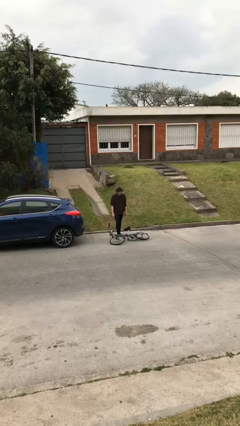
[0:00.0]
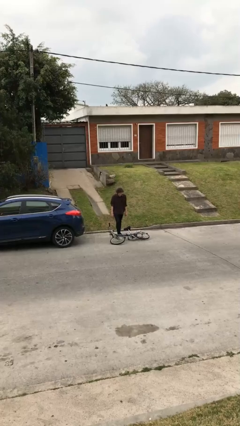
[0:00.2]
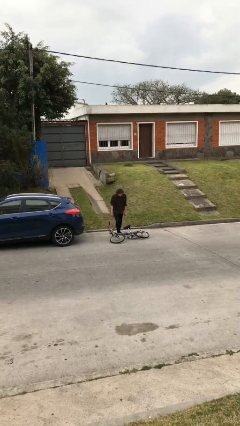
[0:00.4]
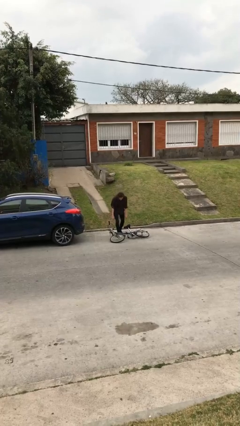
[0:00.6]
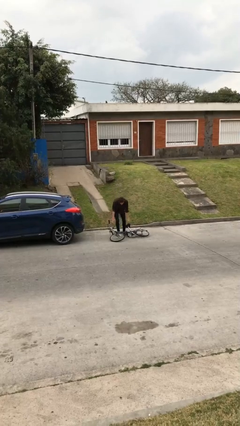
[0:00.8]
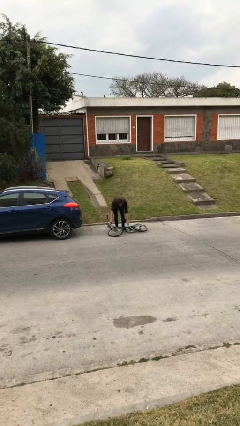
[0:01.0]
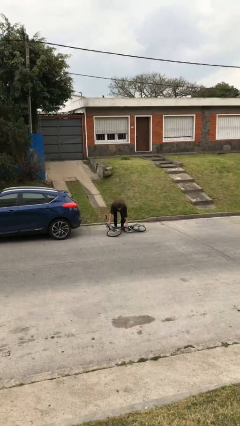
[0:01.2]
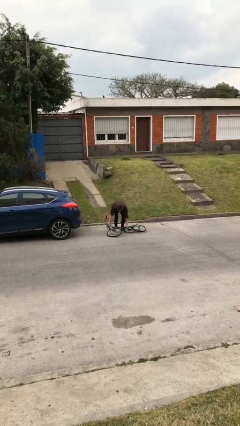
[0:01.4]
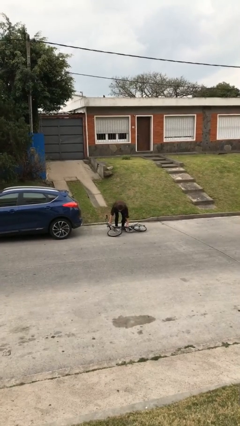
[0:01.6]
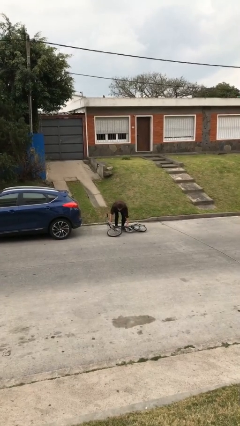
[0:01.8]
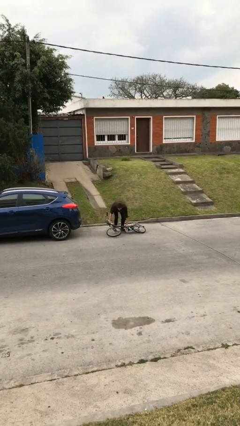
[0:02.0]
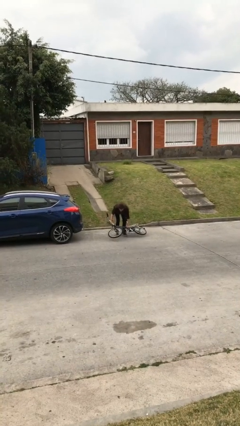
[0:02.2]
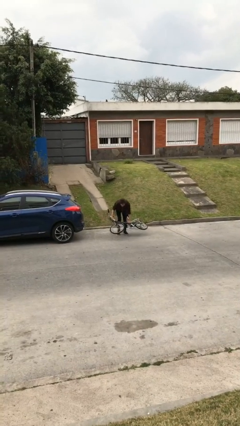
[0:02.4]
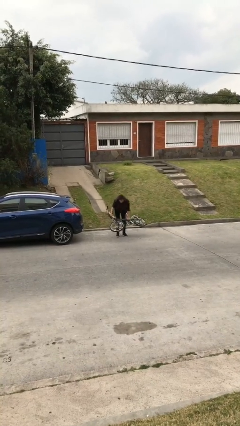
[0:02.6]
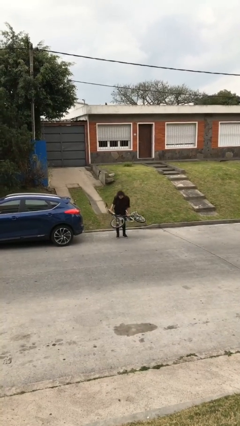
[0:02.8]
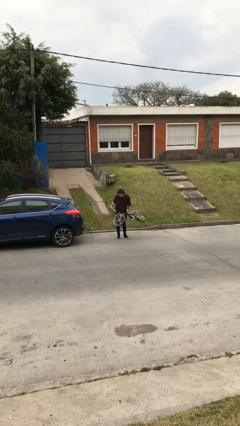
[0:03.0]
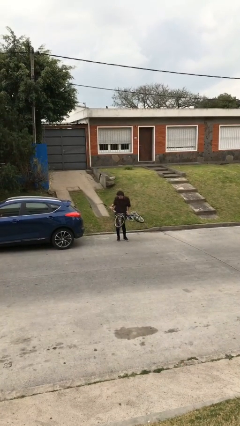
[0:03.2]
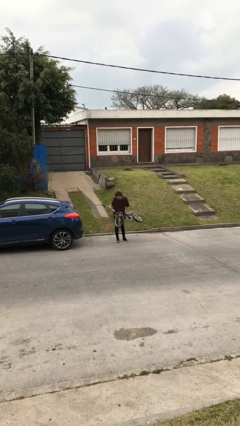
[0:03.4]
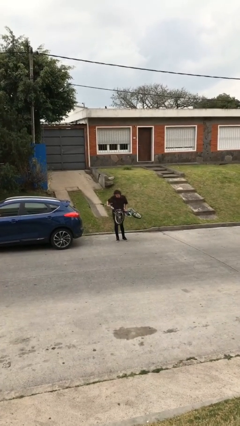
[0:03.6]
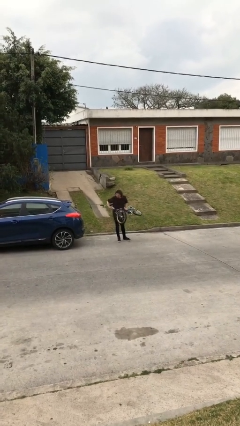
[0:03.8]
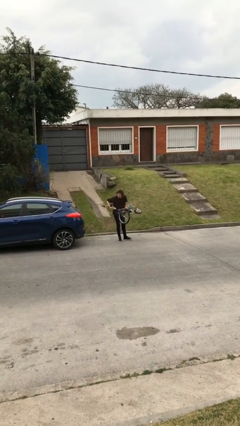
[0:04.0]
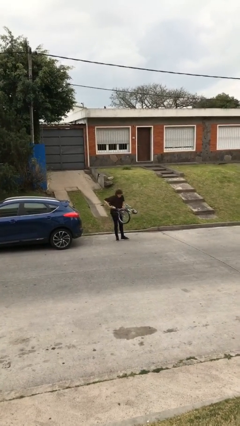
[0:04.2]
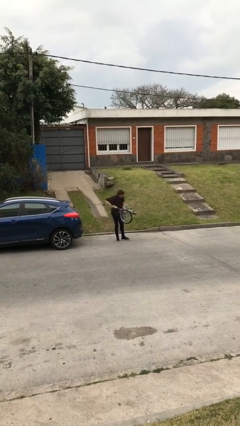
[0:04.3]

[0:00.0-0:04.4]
person picks up object from floor

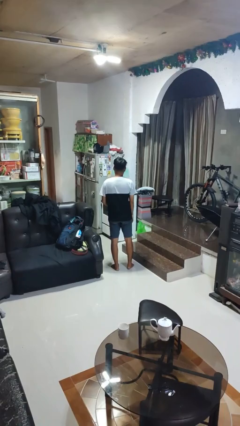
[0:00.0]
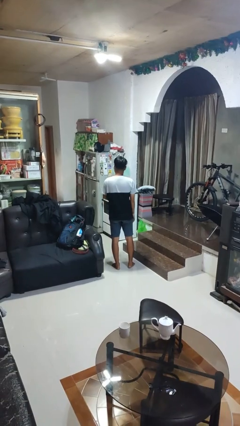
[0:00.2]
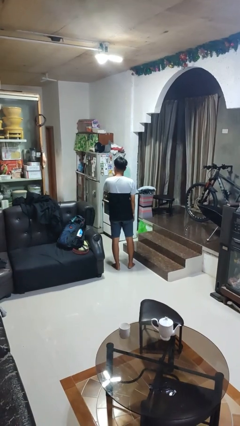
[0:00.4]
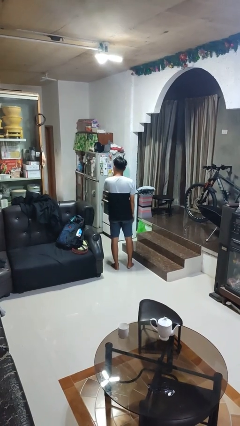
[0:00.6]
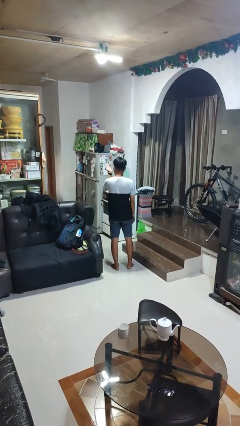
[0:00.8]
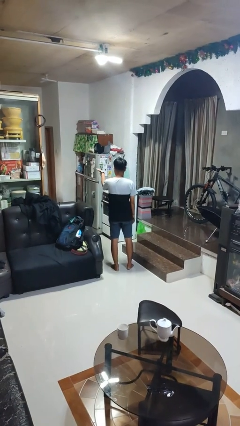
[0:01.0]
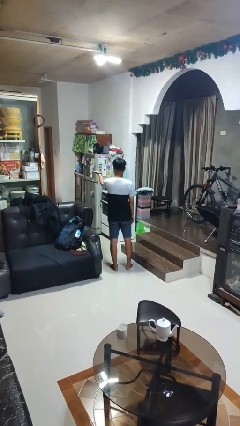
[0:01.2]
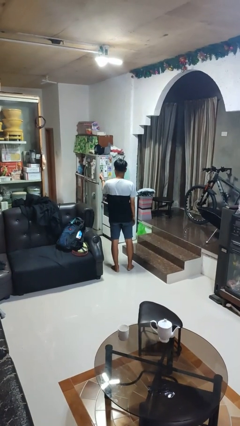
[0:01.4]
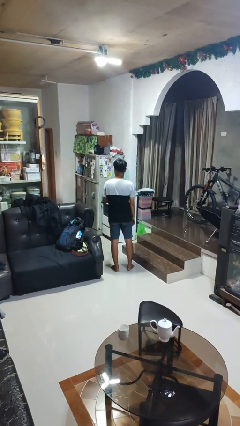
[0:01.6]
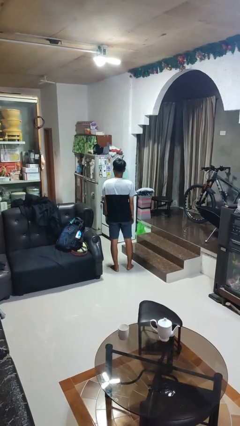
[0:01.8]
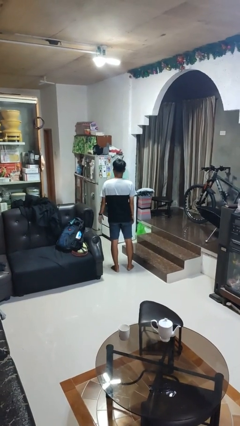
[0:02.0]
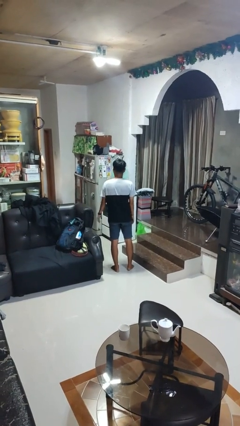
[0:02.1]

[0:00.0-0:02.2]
person gestures blow kiss

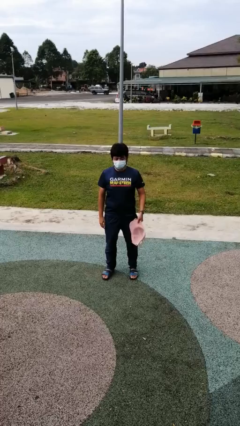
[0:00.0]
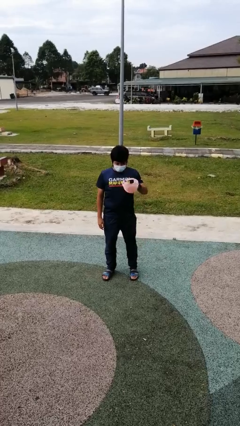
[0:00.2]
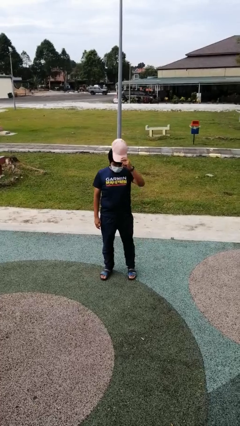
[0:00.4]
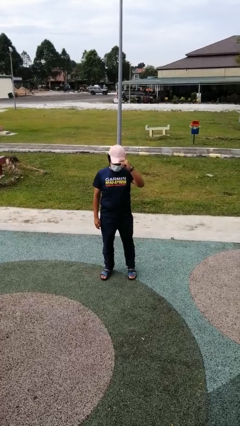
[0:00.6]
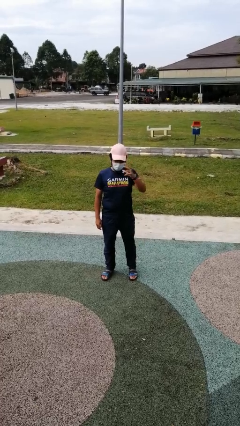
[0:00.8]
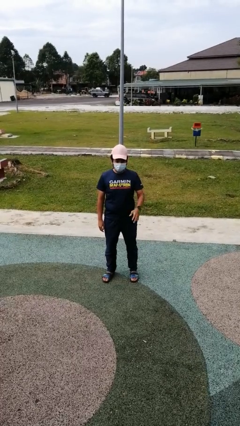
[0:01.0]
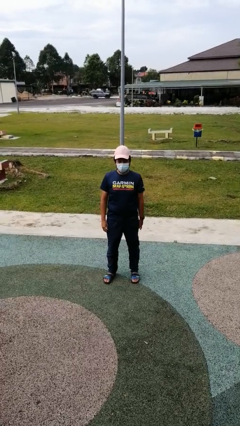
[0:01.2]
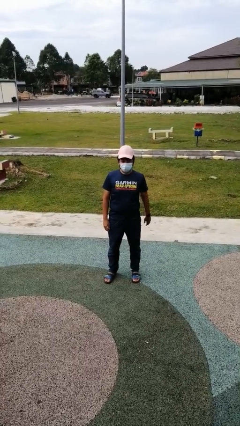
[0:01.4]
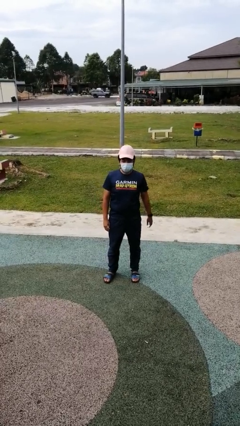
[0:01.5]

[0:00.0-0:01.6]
person puts on hat

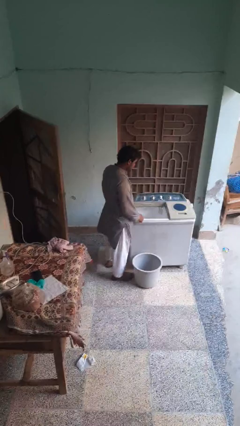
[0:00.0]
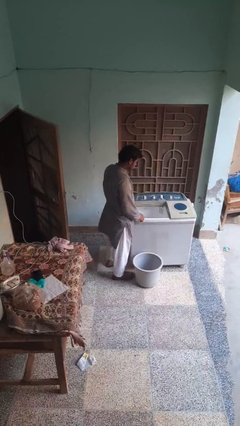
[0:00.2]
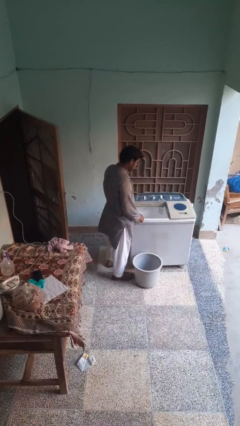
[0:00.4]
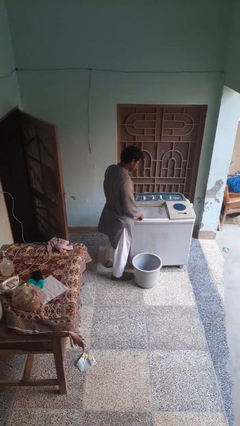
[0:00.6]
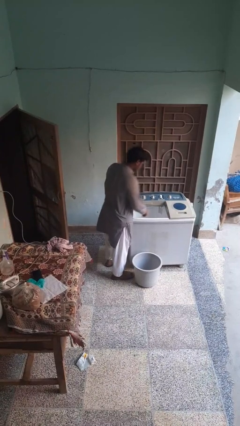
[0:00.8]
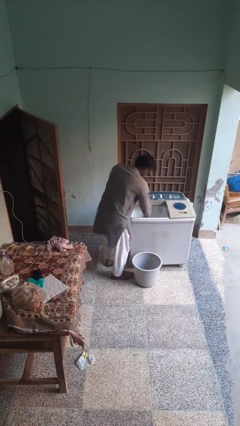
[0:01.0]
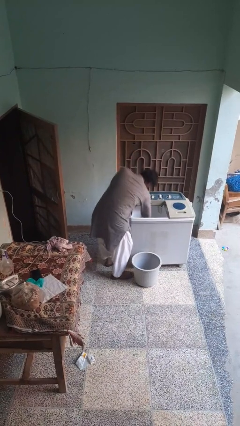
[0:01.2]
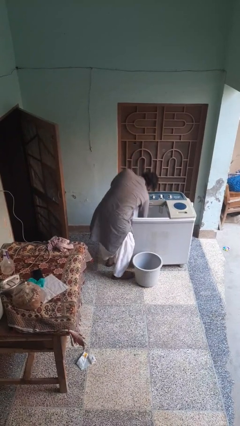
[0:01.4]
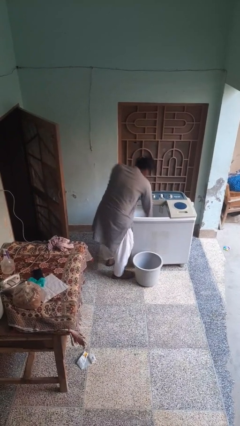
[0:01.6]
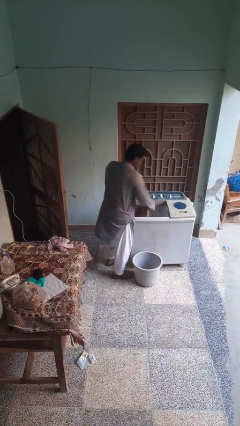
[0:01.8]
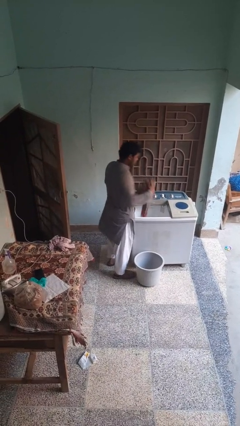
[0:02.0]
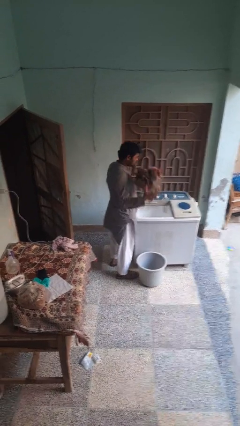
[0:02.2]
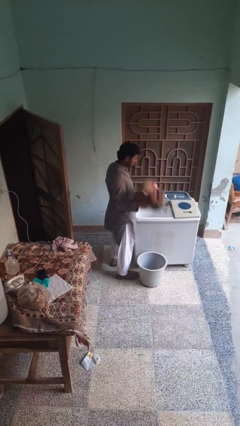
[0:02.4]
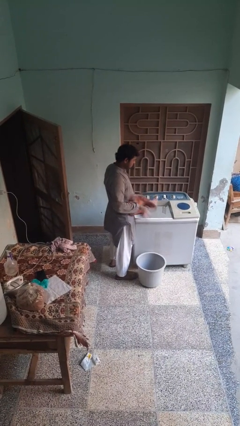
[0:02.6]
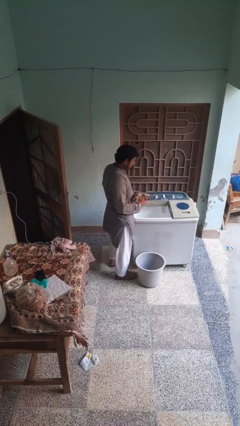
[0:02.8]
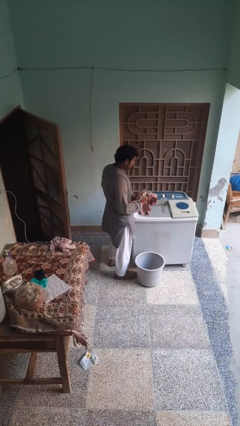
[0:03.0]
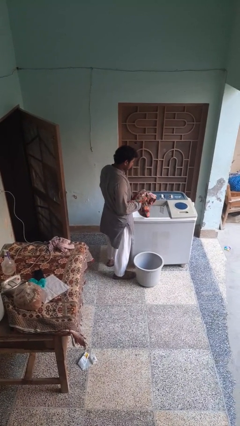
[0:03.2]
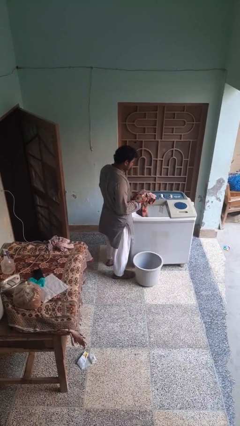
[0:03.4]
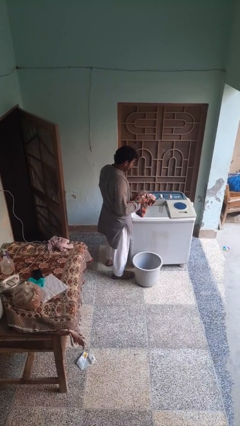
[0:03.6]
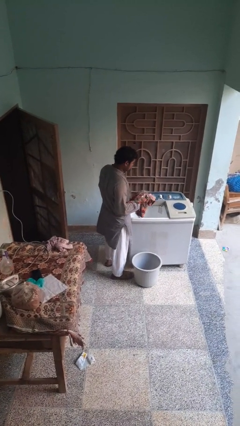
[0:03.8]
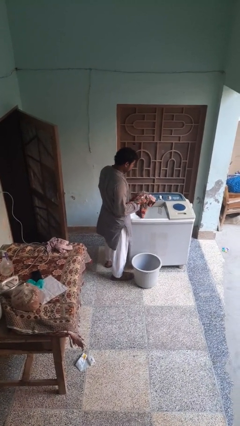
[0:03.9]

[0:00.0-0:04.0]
person unloads clotheswasher

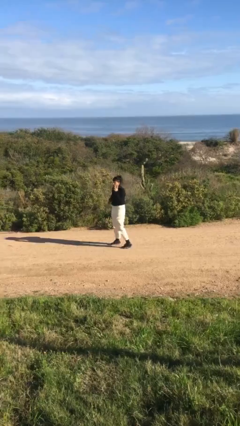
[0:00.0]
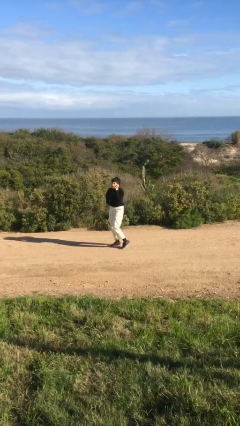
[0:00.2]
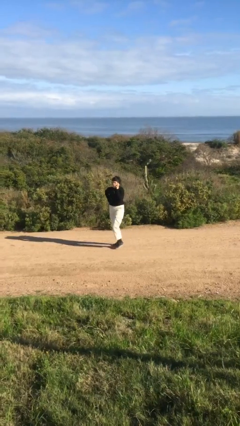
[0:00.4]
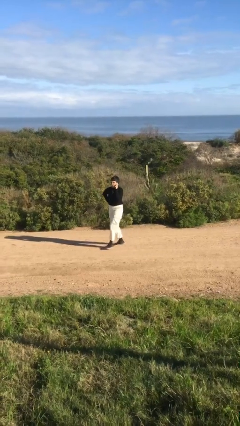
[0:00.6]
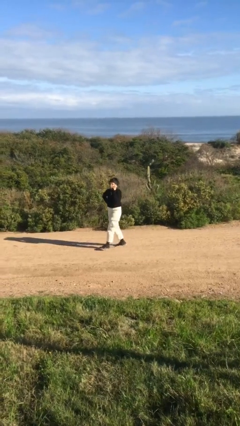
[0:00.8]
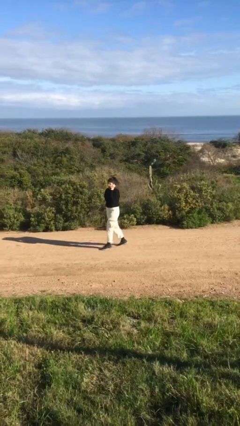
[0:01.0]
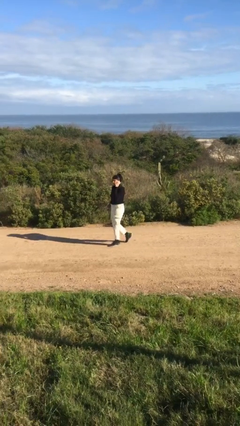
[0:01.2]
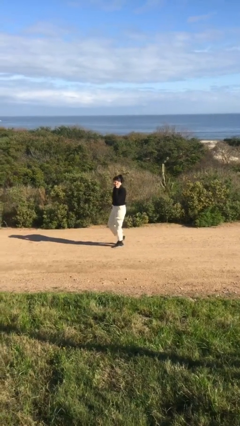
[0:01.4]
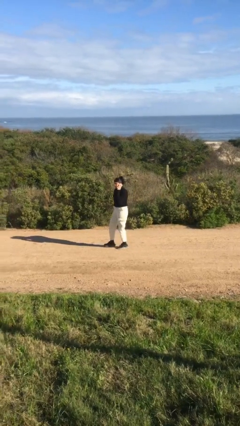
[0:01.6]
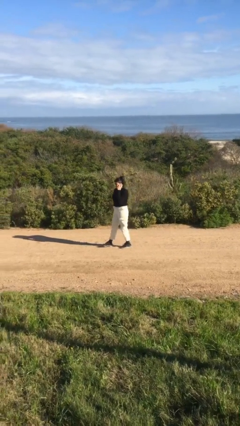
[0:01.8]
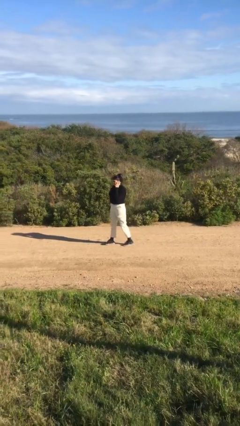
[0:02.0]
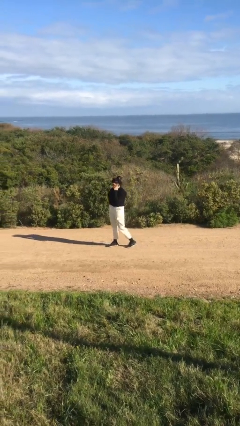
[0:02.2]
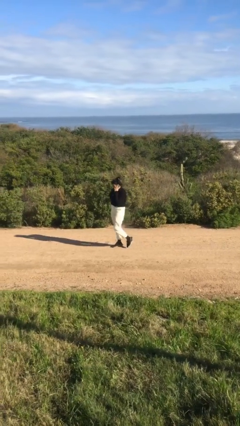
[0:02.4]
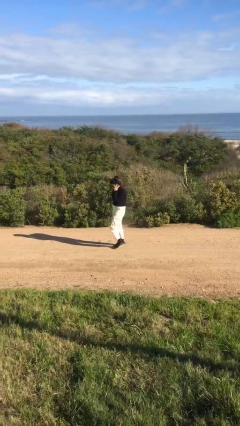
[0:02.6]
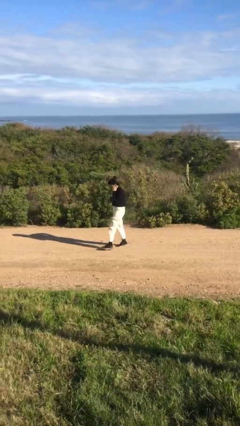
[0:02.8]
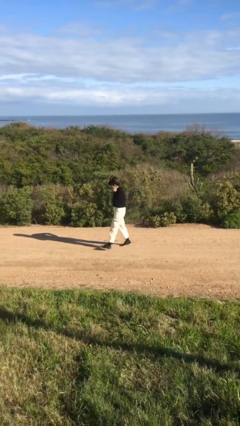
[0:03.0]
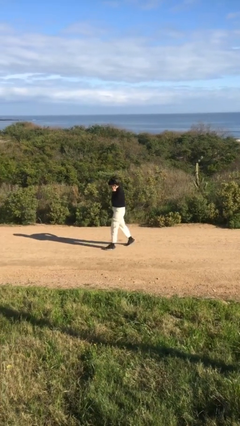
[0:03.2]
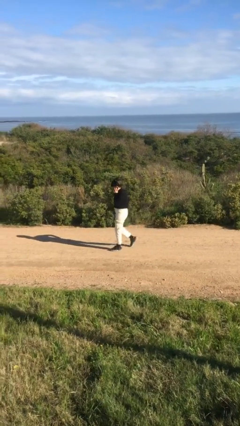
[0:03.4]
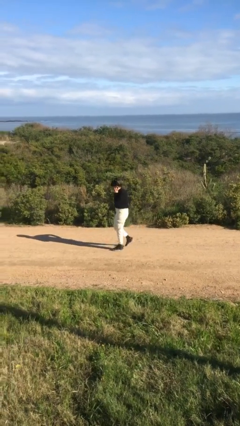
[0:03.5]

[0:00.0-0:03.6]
person talks on phone

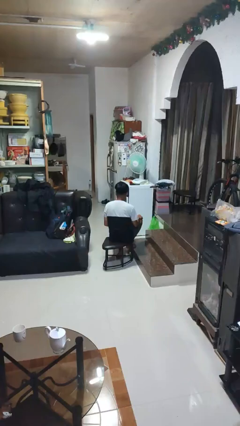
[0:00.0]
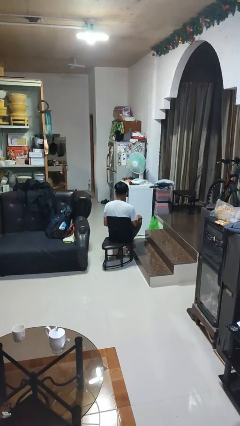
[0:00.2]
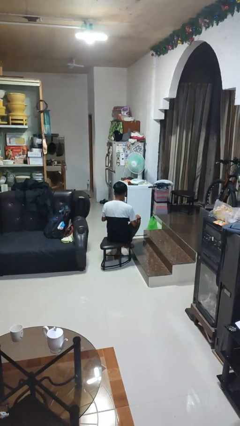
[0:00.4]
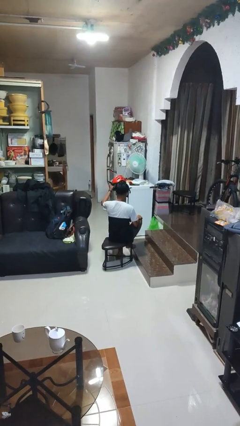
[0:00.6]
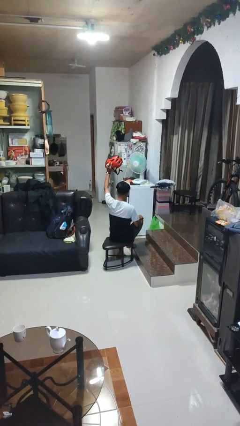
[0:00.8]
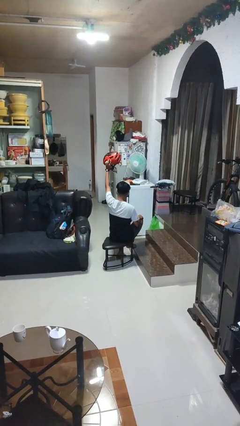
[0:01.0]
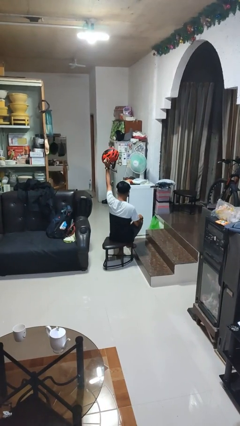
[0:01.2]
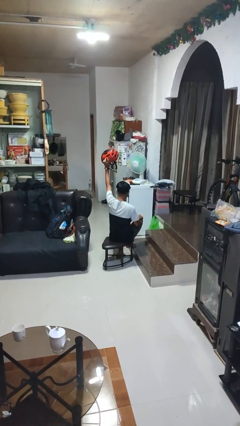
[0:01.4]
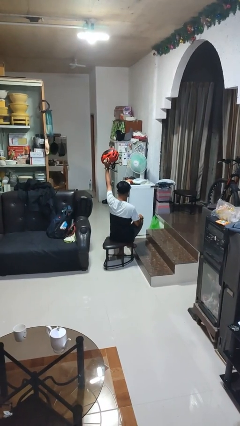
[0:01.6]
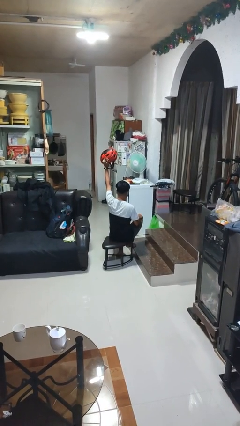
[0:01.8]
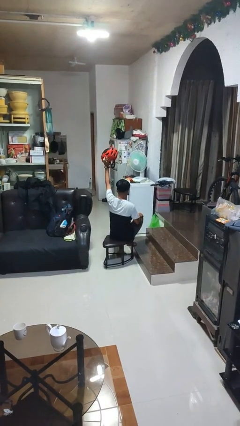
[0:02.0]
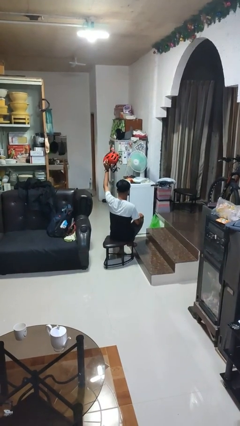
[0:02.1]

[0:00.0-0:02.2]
person holds object above head
